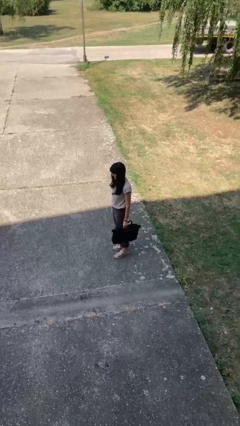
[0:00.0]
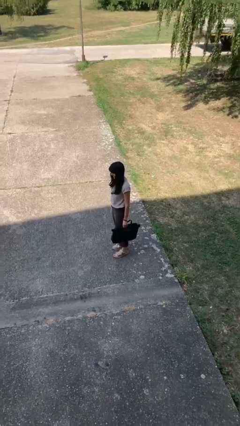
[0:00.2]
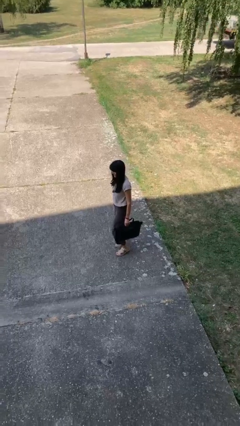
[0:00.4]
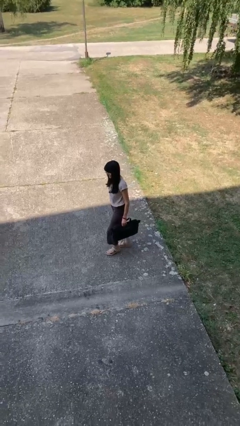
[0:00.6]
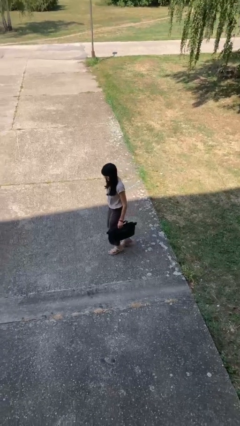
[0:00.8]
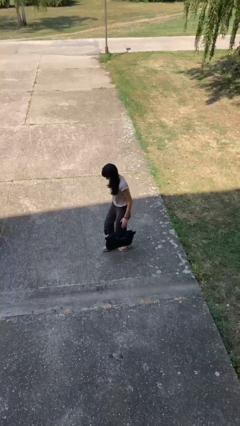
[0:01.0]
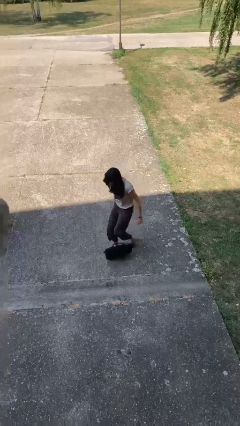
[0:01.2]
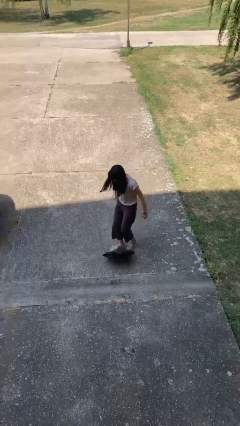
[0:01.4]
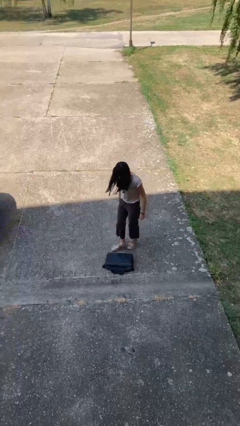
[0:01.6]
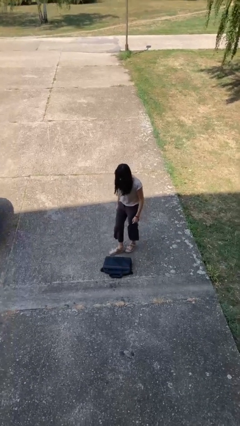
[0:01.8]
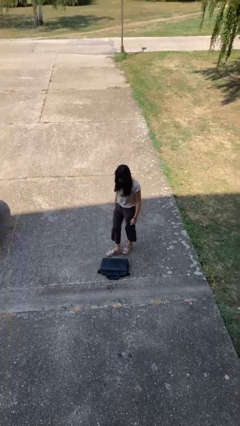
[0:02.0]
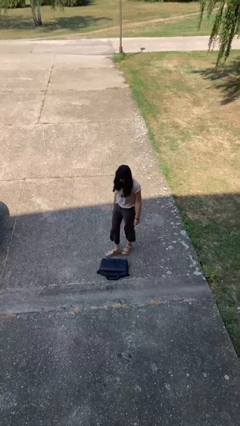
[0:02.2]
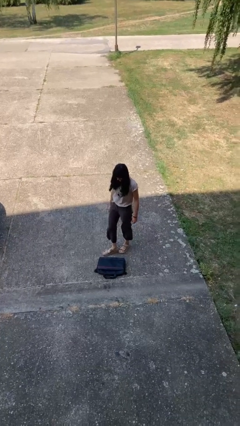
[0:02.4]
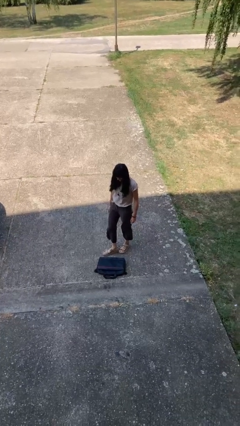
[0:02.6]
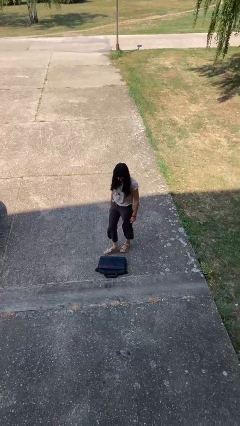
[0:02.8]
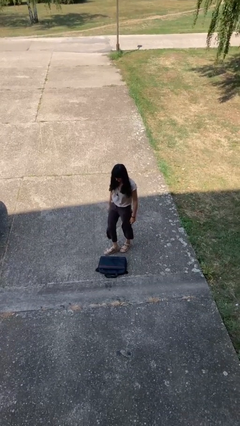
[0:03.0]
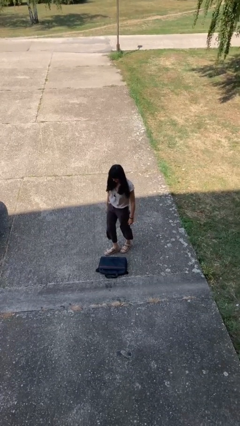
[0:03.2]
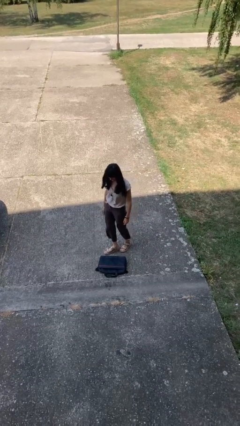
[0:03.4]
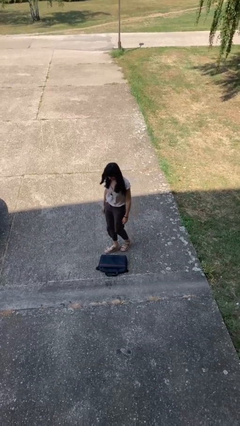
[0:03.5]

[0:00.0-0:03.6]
person drops object

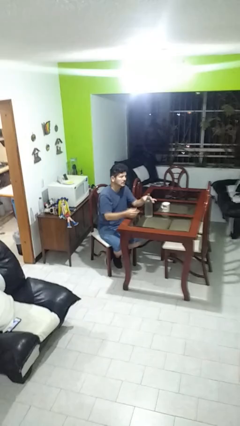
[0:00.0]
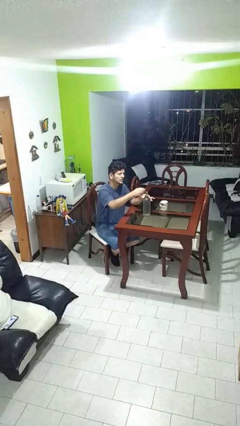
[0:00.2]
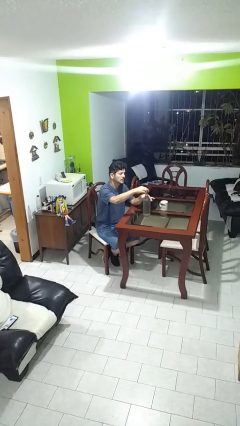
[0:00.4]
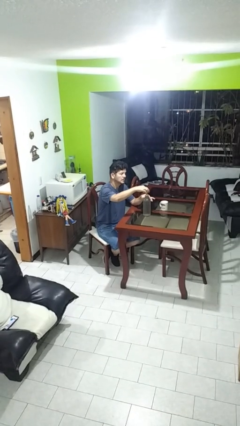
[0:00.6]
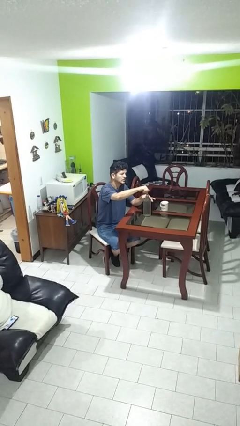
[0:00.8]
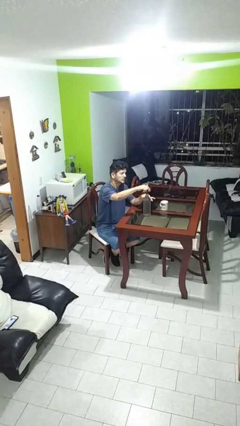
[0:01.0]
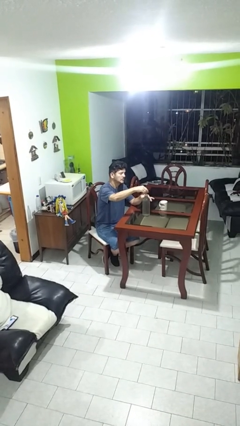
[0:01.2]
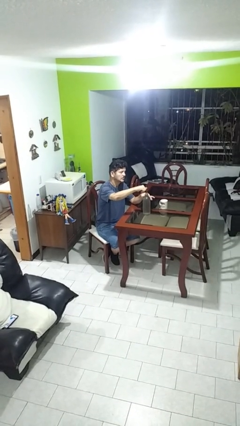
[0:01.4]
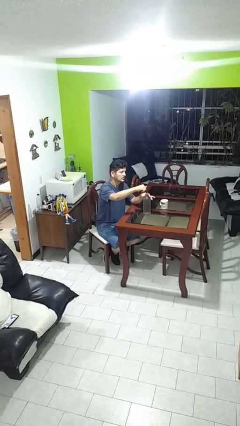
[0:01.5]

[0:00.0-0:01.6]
person screws lid to bottle

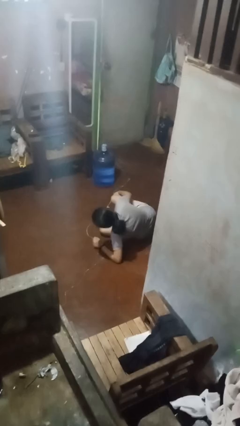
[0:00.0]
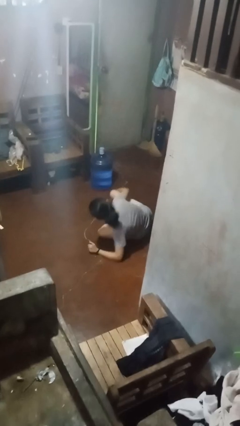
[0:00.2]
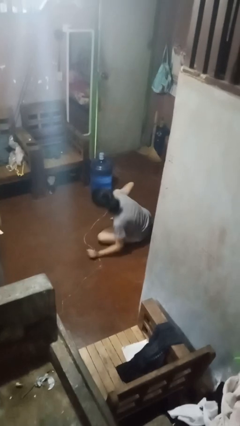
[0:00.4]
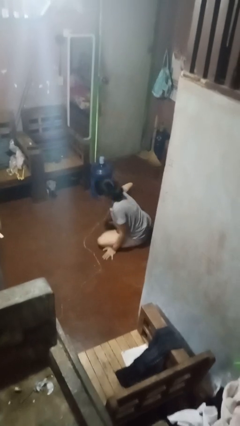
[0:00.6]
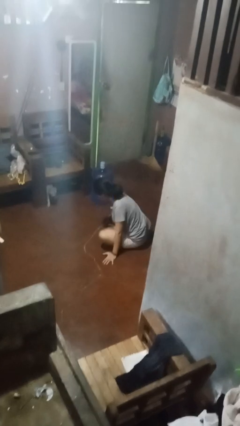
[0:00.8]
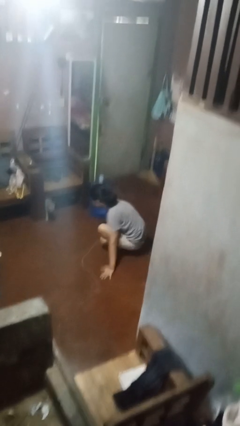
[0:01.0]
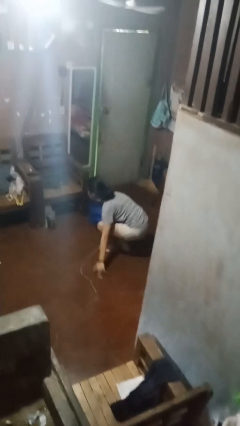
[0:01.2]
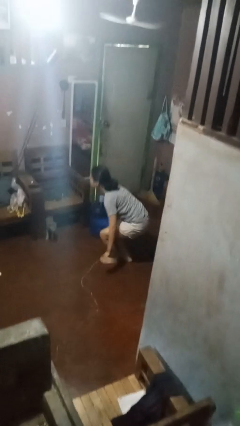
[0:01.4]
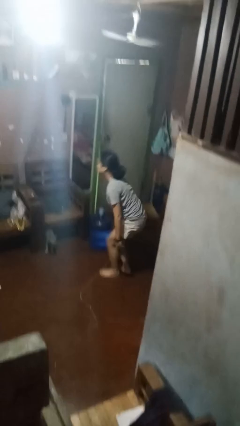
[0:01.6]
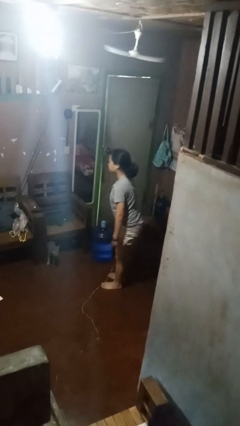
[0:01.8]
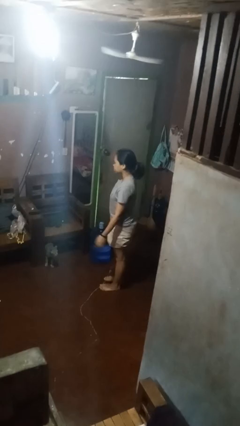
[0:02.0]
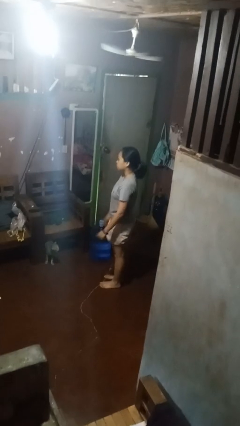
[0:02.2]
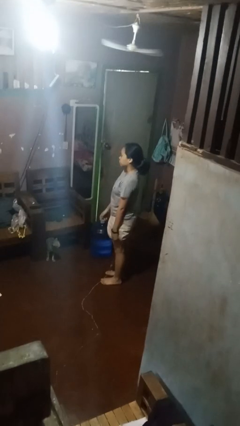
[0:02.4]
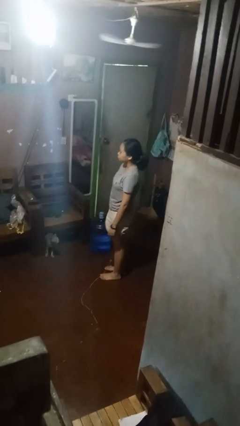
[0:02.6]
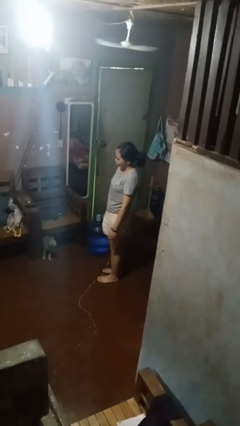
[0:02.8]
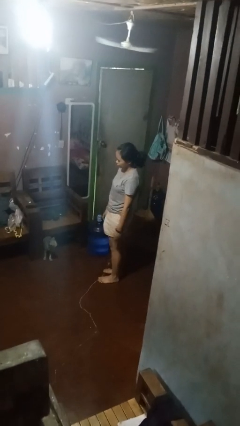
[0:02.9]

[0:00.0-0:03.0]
person stands up from floor

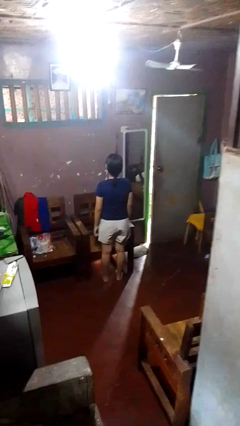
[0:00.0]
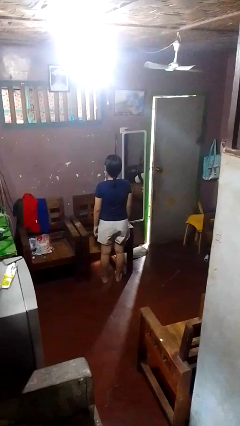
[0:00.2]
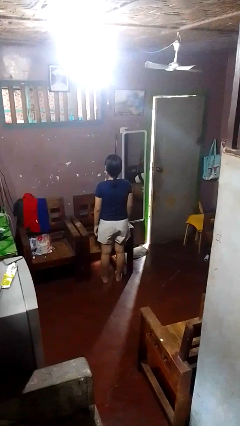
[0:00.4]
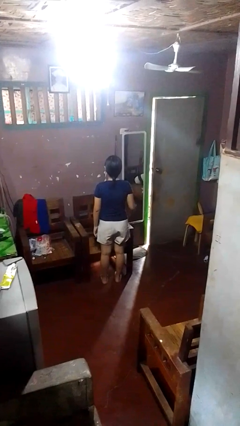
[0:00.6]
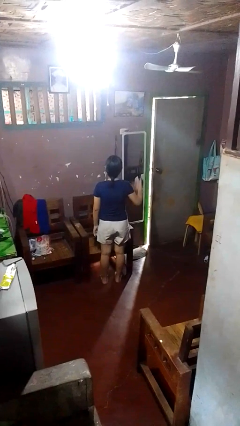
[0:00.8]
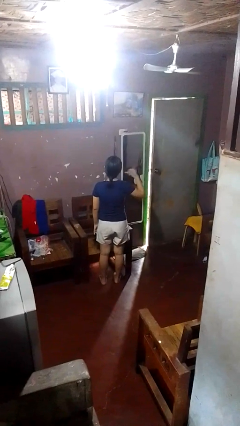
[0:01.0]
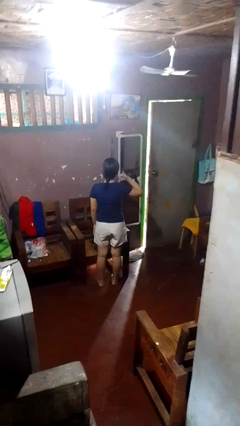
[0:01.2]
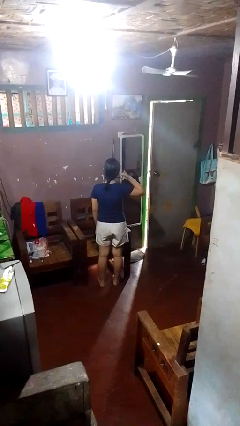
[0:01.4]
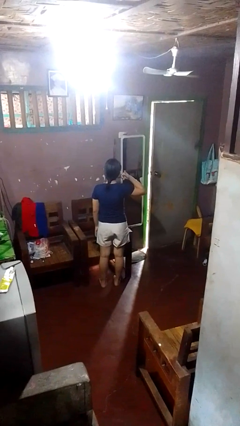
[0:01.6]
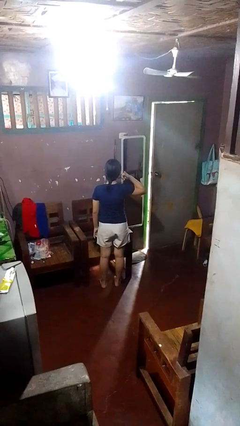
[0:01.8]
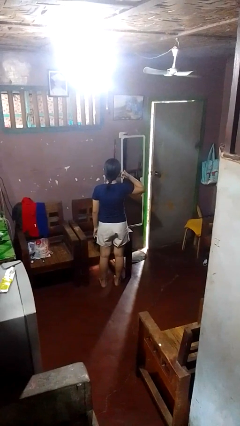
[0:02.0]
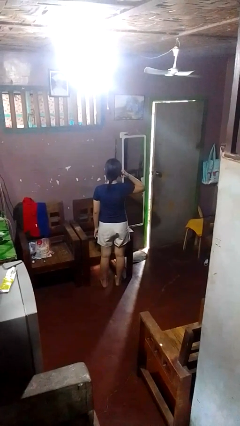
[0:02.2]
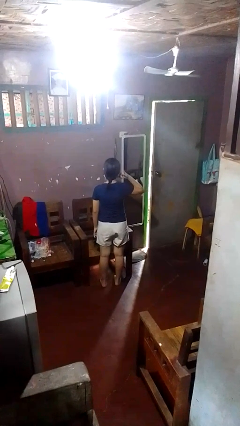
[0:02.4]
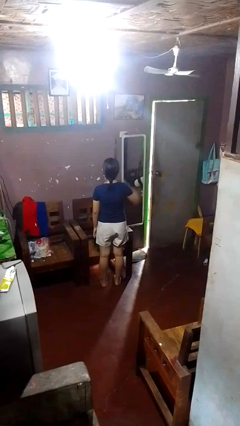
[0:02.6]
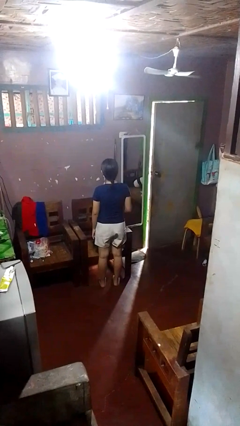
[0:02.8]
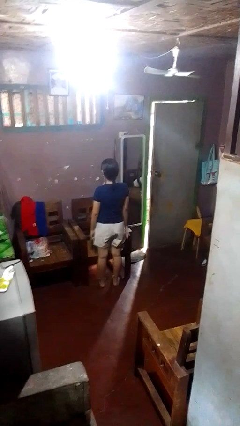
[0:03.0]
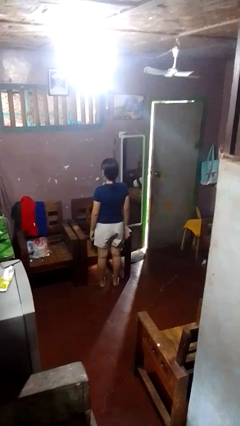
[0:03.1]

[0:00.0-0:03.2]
person gestures call me

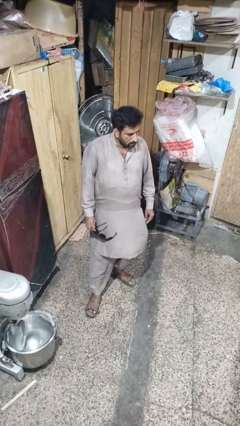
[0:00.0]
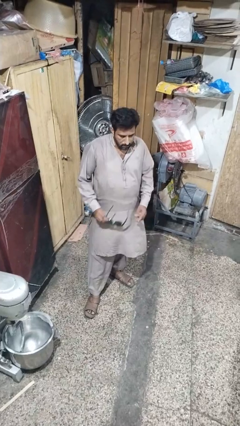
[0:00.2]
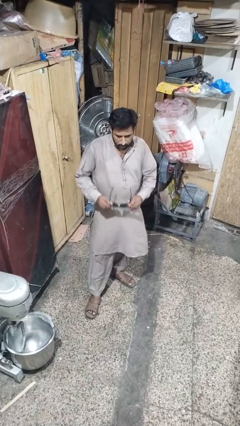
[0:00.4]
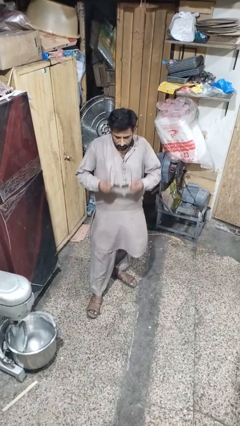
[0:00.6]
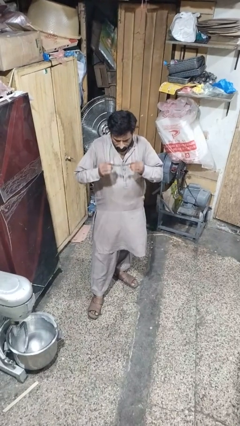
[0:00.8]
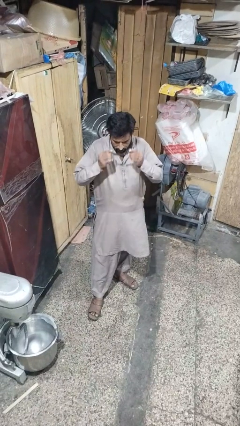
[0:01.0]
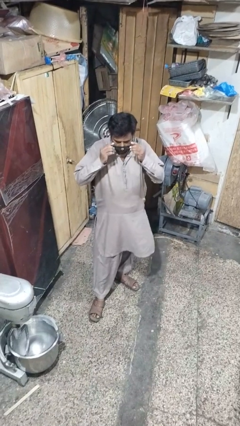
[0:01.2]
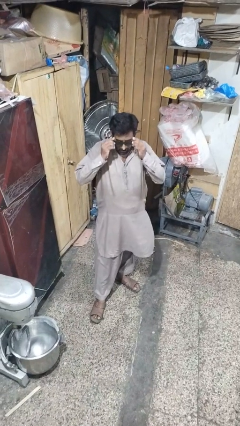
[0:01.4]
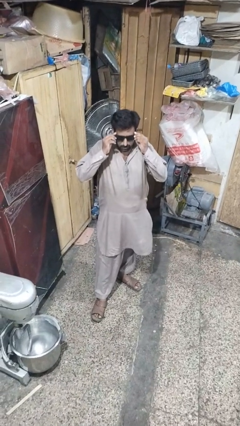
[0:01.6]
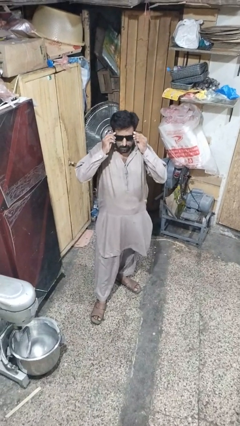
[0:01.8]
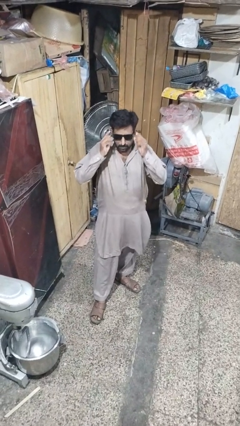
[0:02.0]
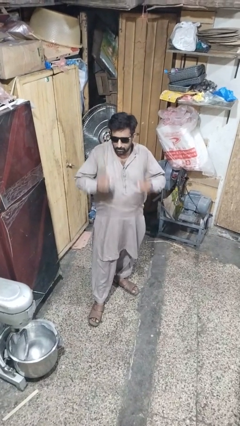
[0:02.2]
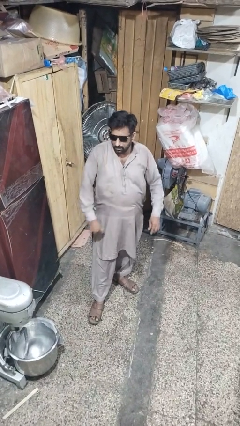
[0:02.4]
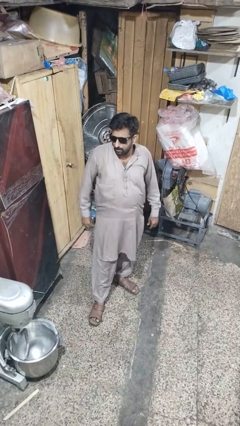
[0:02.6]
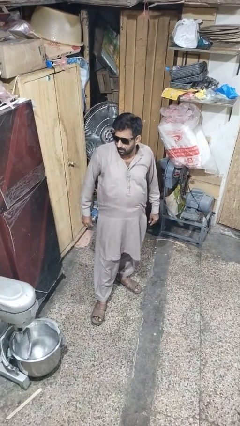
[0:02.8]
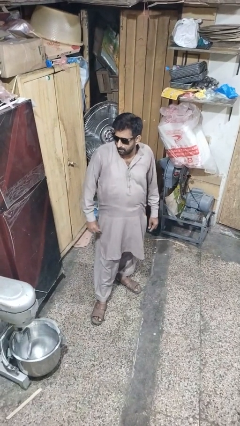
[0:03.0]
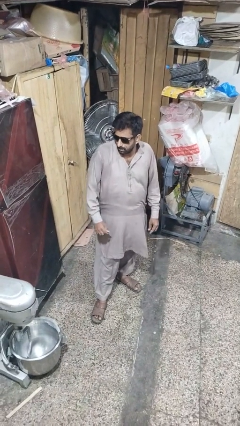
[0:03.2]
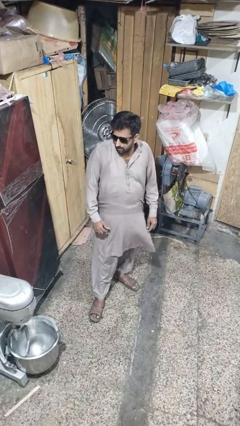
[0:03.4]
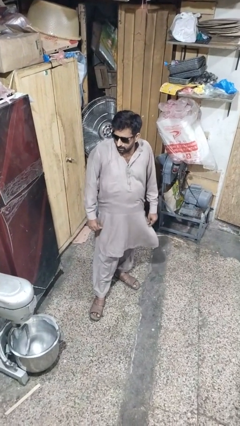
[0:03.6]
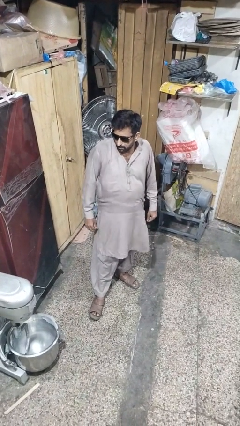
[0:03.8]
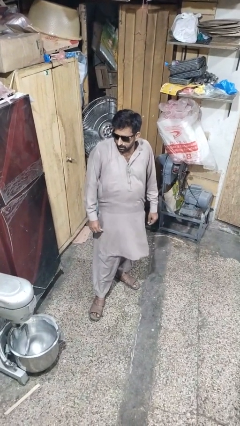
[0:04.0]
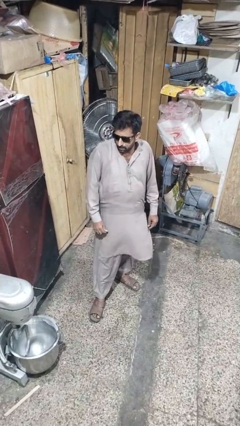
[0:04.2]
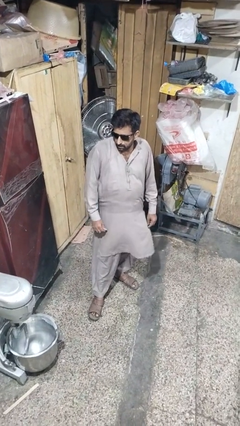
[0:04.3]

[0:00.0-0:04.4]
person puts on sunglasses

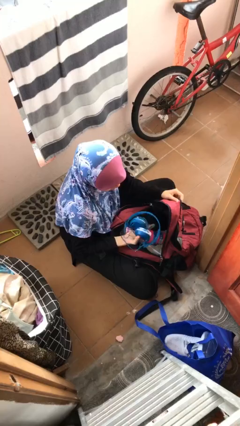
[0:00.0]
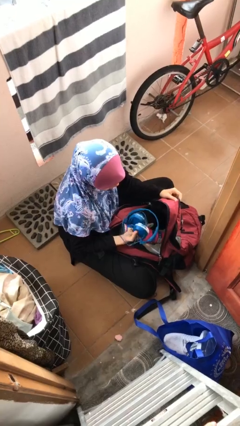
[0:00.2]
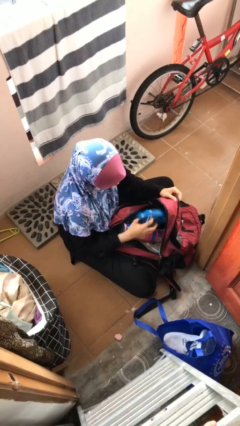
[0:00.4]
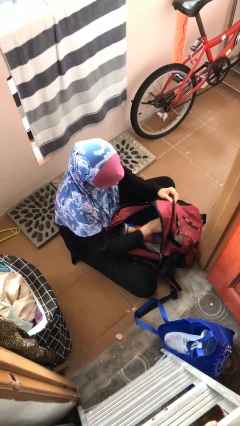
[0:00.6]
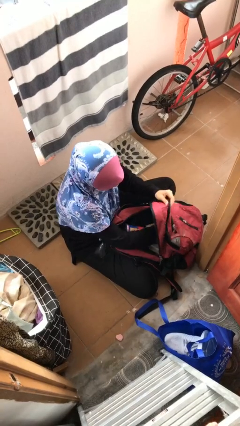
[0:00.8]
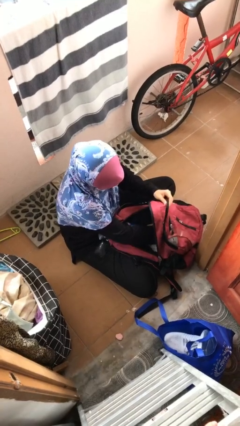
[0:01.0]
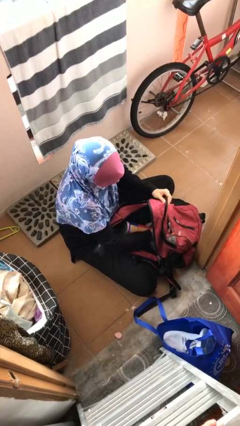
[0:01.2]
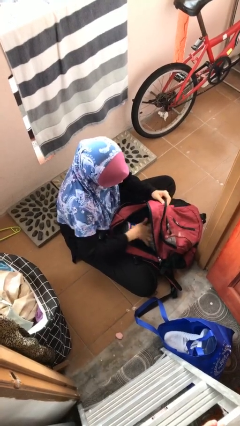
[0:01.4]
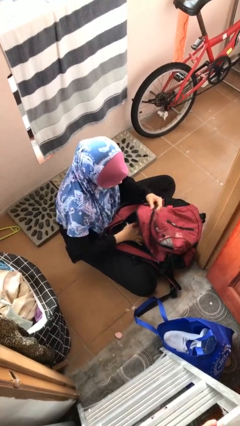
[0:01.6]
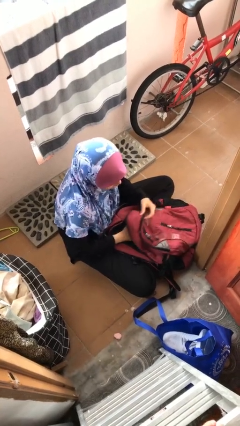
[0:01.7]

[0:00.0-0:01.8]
person puts object into backpack
